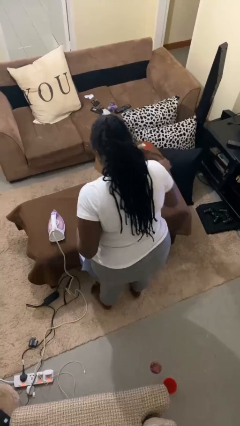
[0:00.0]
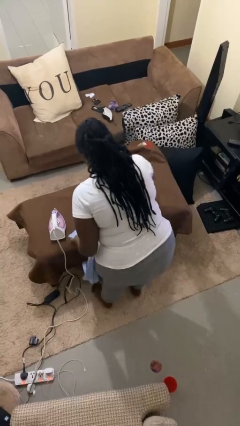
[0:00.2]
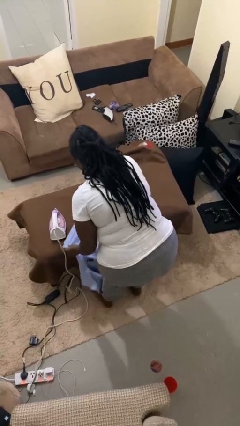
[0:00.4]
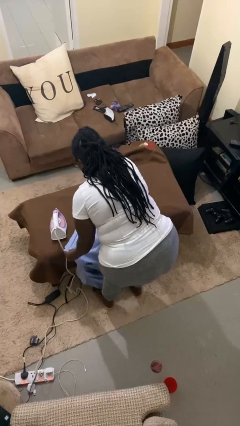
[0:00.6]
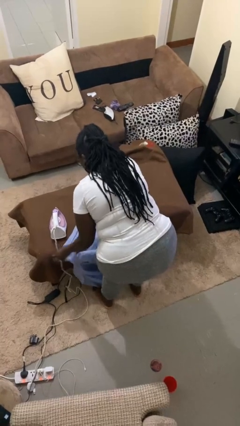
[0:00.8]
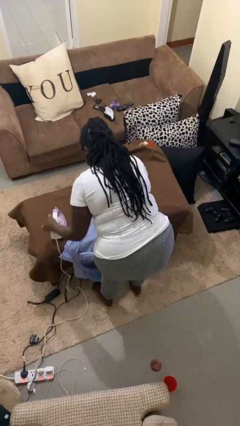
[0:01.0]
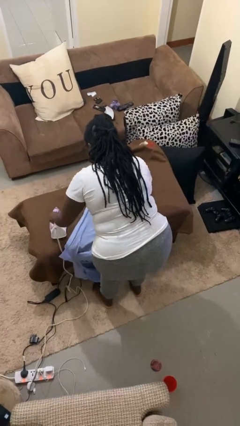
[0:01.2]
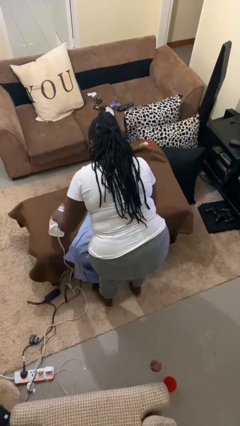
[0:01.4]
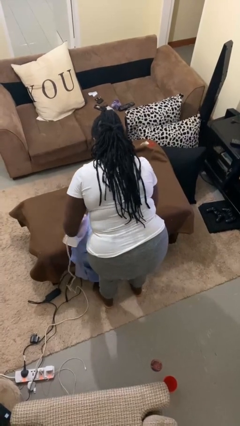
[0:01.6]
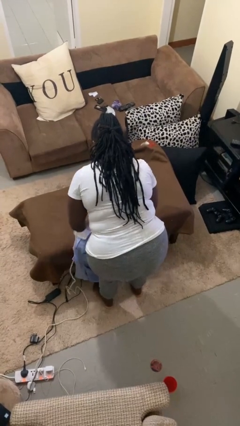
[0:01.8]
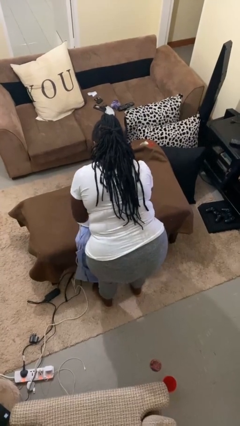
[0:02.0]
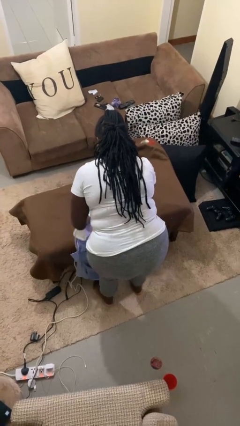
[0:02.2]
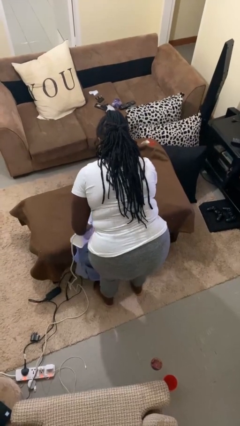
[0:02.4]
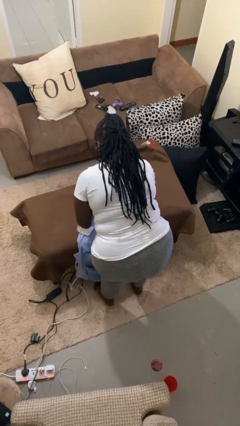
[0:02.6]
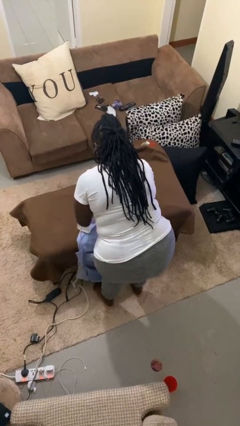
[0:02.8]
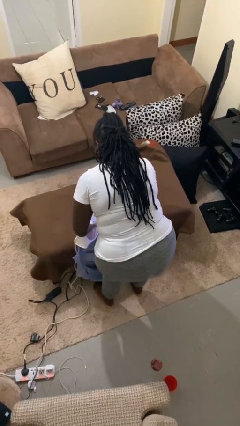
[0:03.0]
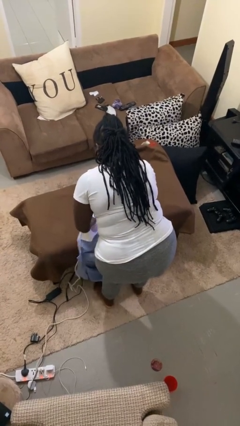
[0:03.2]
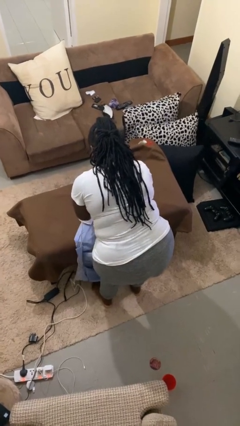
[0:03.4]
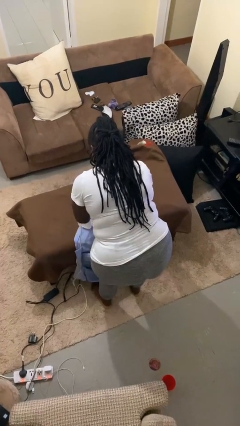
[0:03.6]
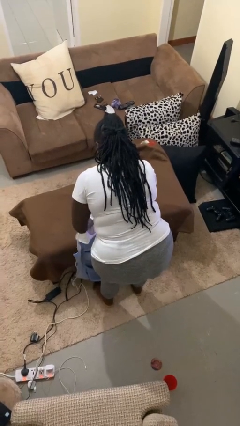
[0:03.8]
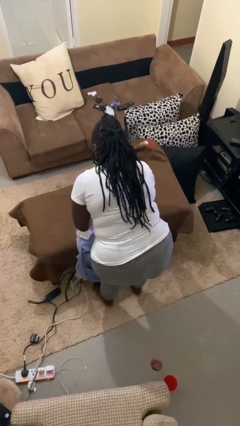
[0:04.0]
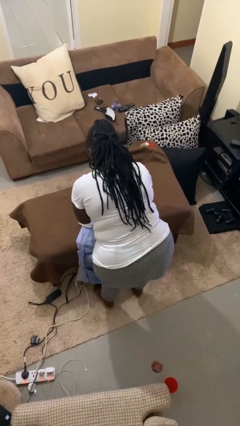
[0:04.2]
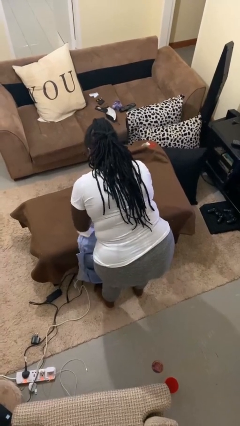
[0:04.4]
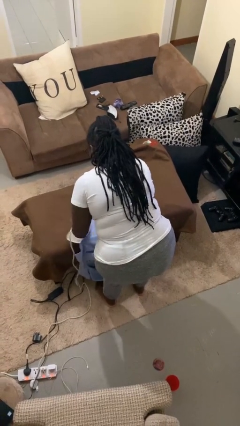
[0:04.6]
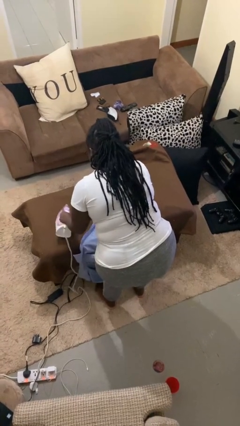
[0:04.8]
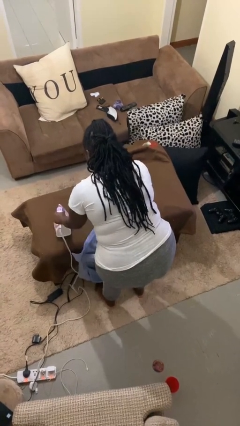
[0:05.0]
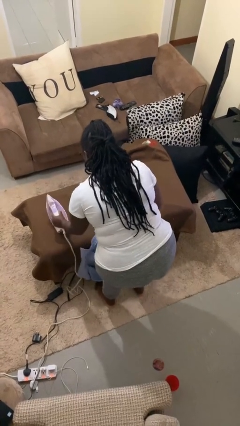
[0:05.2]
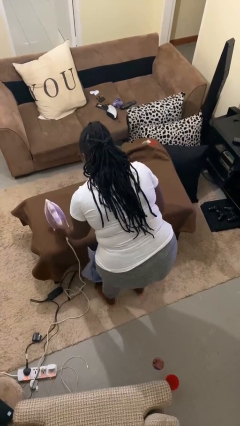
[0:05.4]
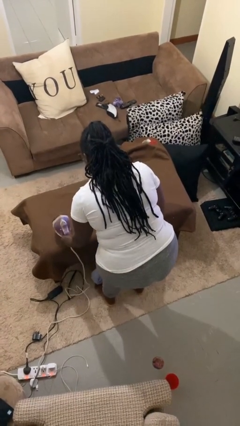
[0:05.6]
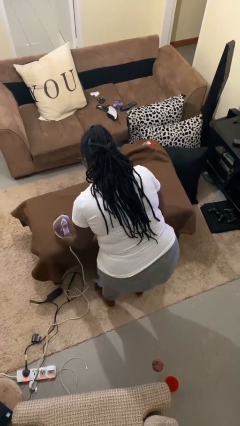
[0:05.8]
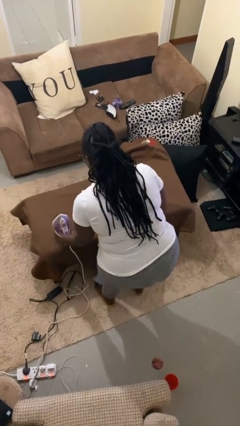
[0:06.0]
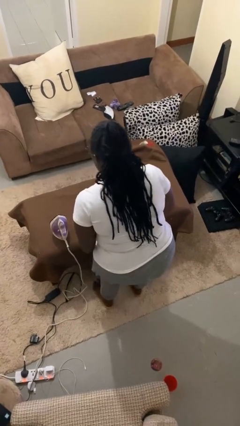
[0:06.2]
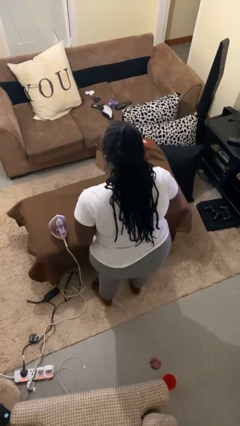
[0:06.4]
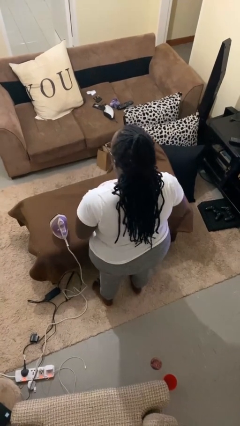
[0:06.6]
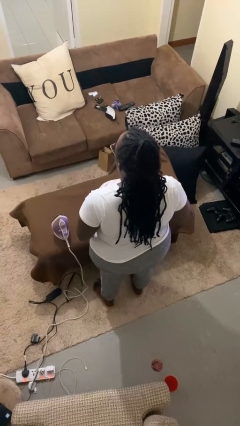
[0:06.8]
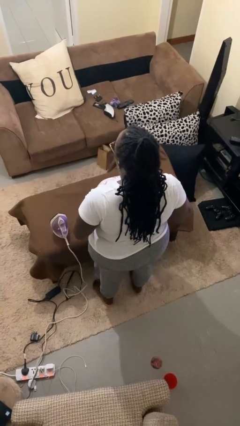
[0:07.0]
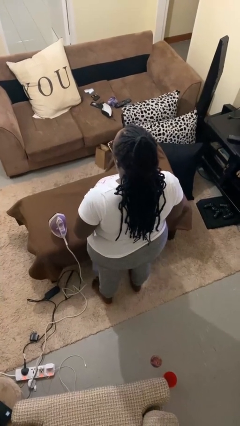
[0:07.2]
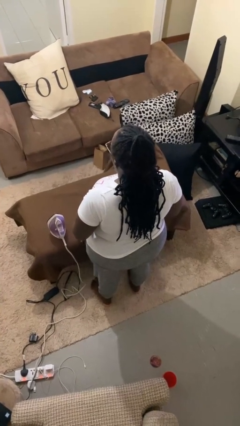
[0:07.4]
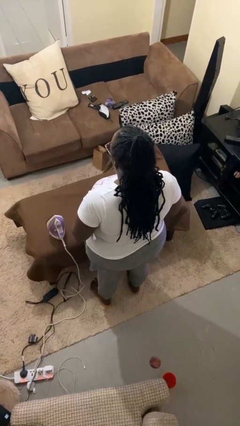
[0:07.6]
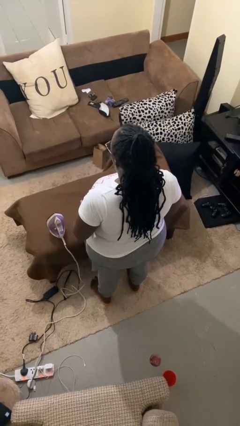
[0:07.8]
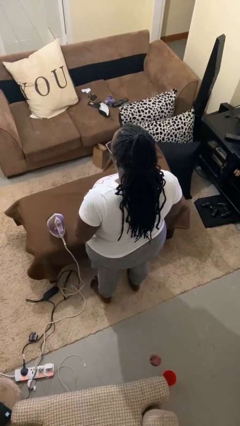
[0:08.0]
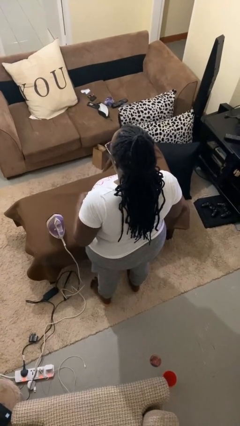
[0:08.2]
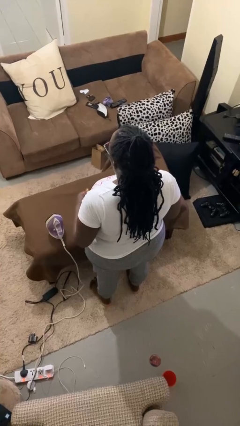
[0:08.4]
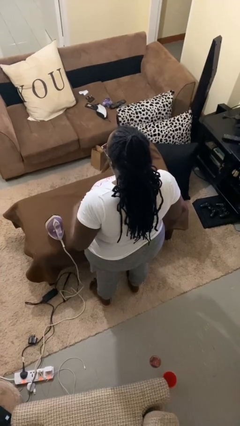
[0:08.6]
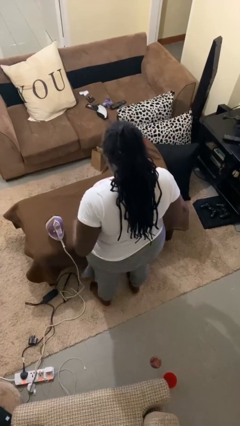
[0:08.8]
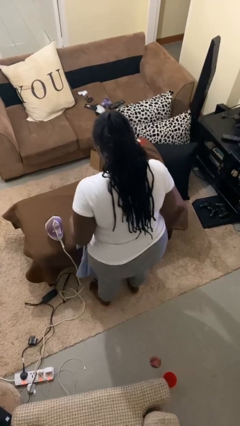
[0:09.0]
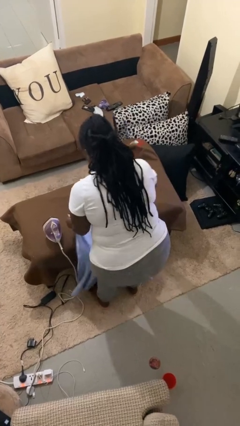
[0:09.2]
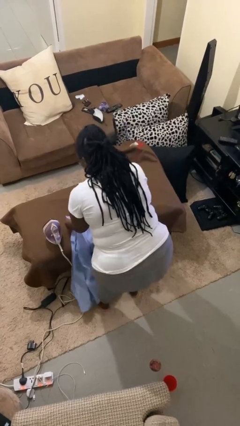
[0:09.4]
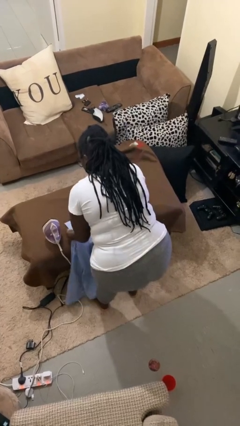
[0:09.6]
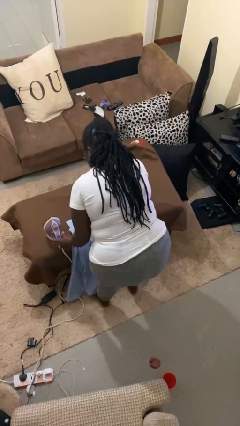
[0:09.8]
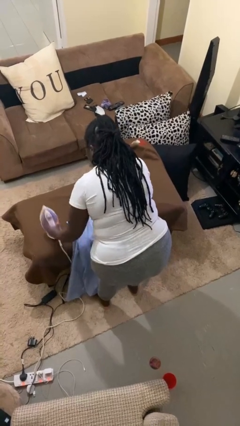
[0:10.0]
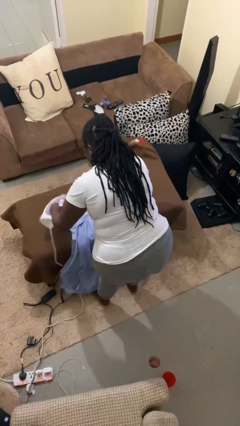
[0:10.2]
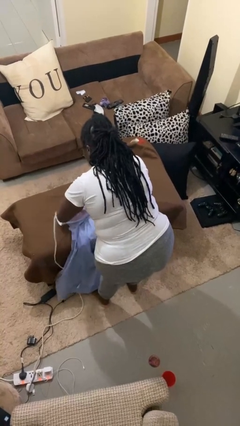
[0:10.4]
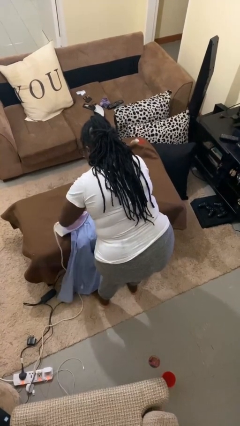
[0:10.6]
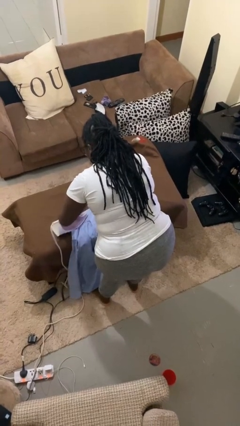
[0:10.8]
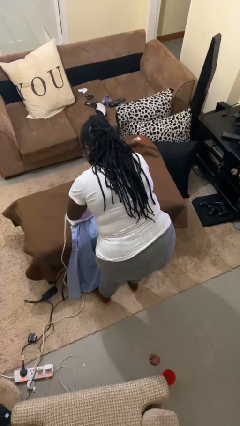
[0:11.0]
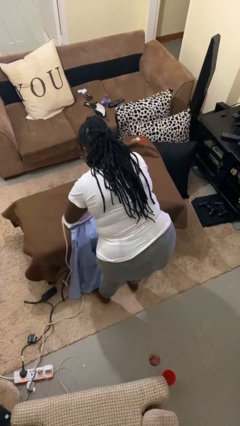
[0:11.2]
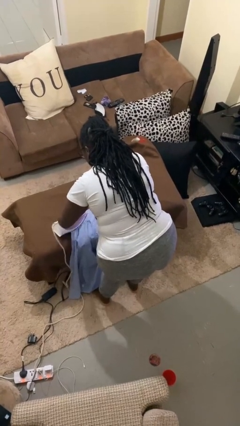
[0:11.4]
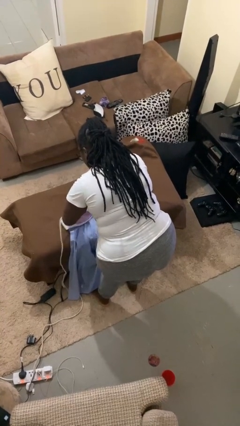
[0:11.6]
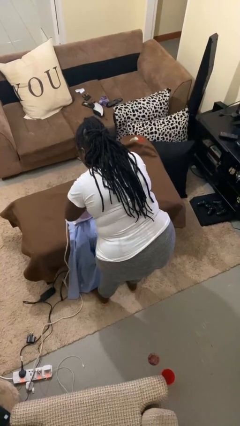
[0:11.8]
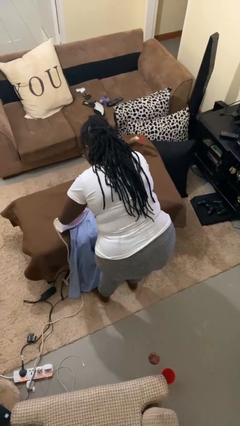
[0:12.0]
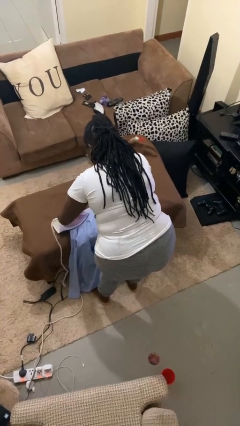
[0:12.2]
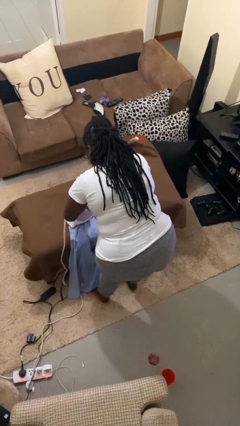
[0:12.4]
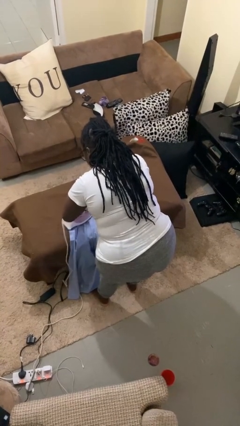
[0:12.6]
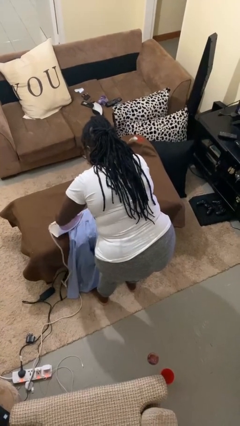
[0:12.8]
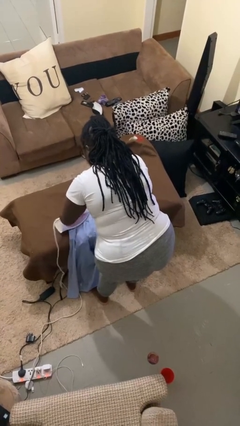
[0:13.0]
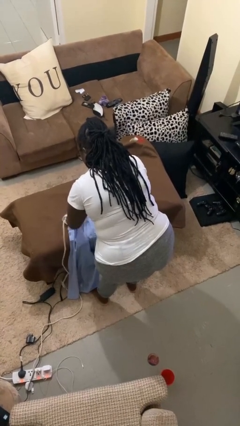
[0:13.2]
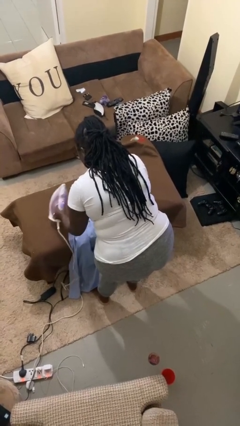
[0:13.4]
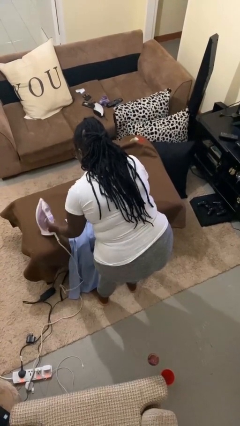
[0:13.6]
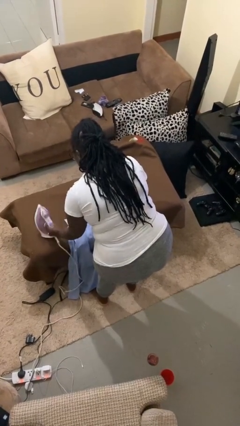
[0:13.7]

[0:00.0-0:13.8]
person irons clothes

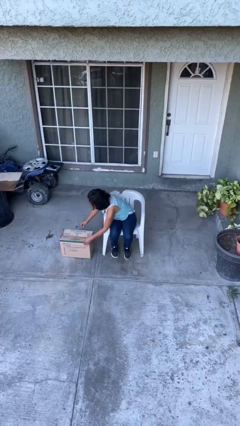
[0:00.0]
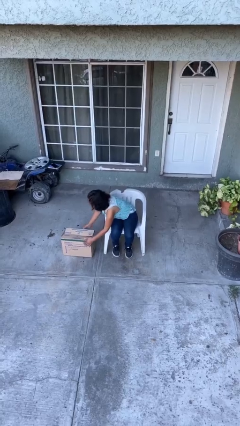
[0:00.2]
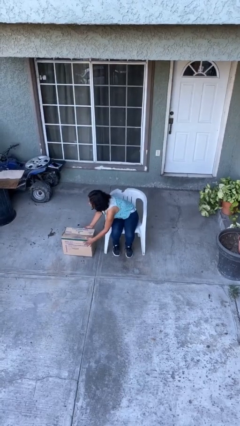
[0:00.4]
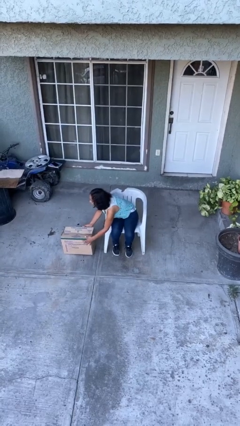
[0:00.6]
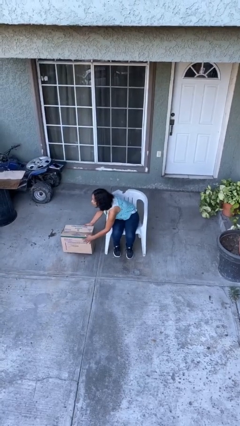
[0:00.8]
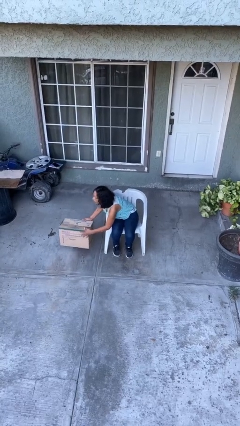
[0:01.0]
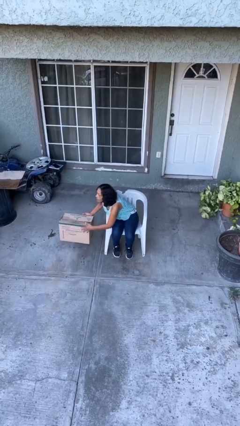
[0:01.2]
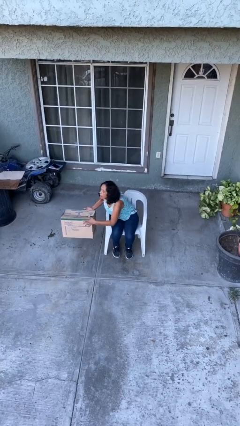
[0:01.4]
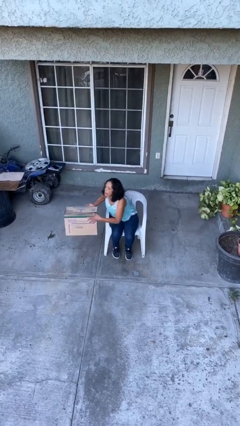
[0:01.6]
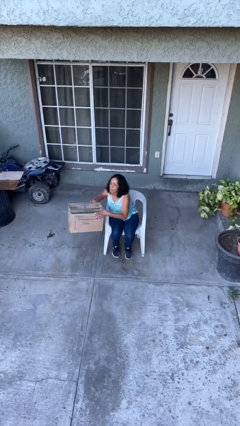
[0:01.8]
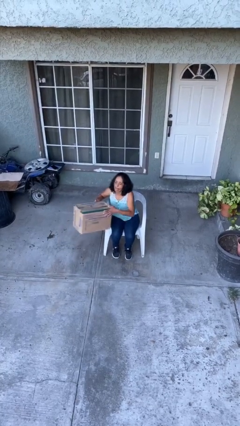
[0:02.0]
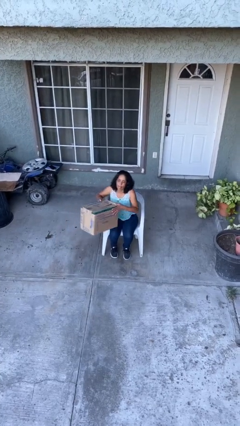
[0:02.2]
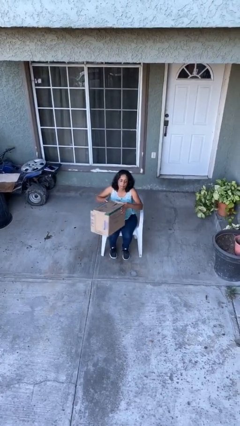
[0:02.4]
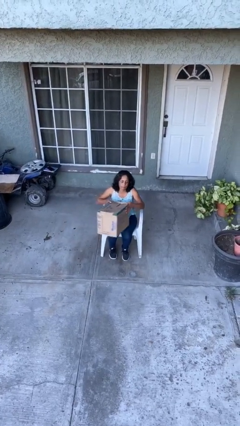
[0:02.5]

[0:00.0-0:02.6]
person picks up object from floor

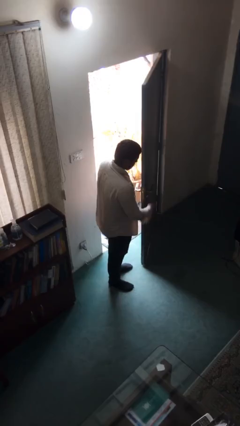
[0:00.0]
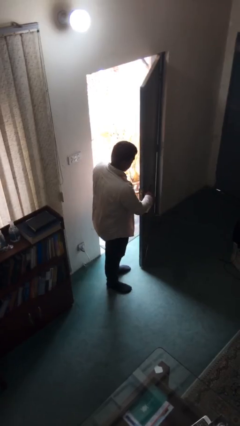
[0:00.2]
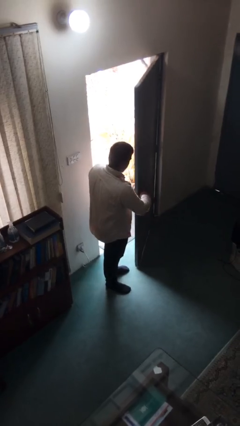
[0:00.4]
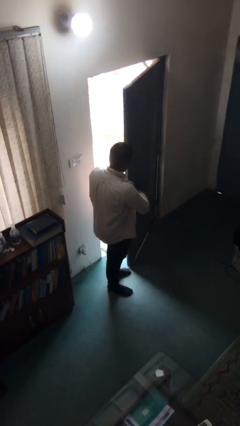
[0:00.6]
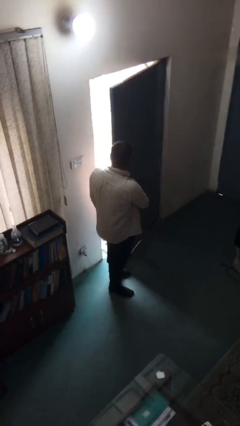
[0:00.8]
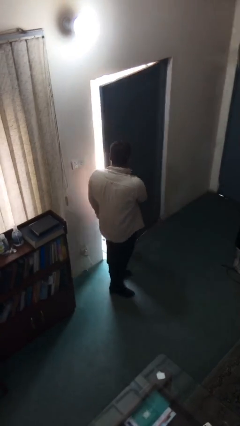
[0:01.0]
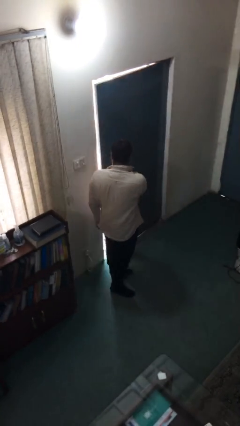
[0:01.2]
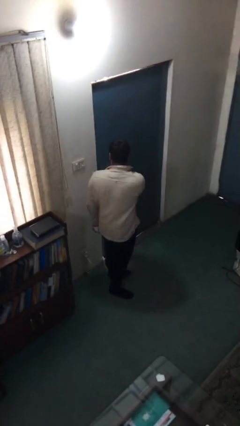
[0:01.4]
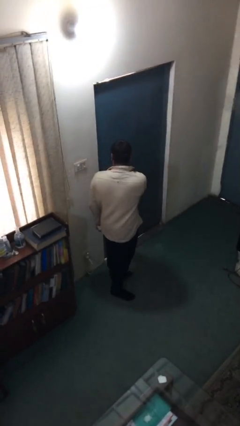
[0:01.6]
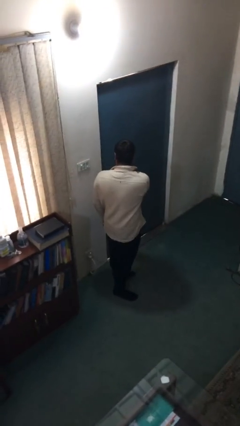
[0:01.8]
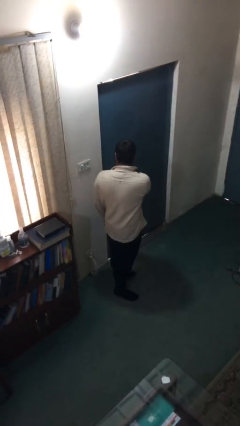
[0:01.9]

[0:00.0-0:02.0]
person closes facility door
